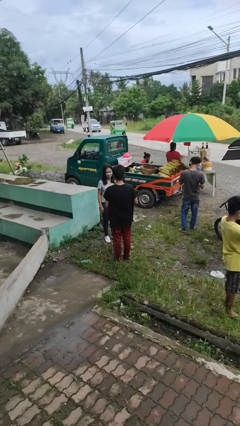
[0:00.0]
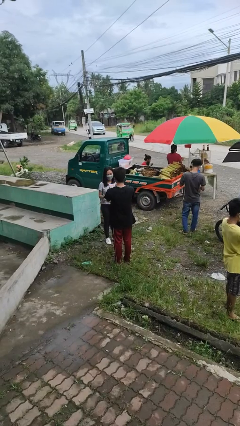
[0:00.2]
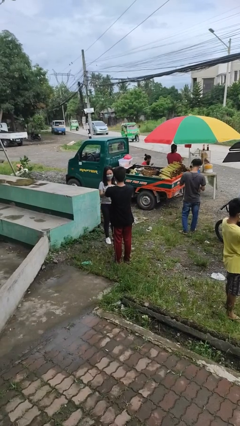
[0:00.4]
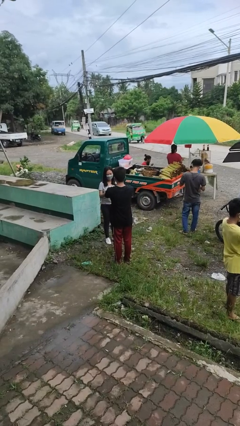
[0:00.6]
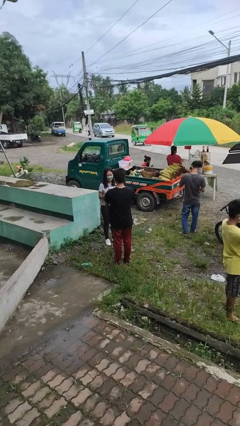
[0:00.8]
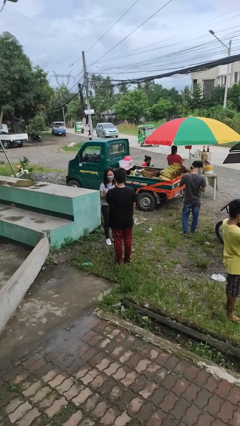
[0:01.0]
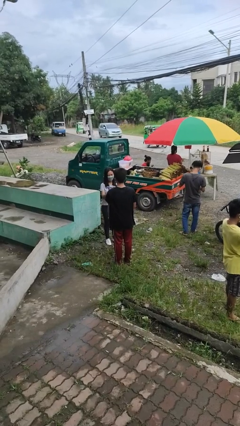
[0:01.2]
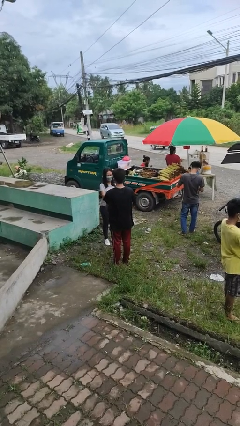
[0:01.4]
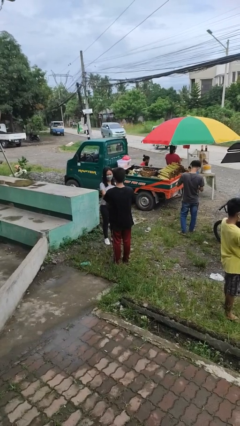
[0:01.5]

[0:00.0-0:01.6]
person transfers object to person

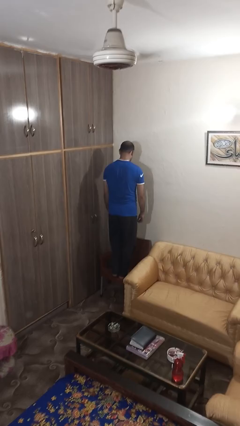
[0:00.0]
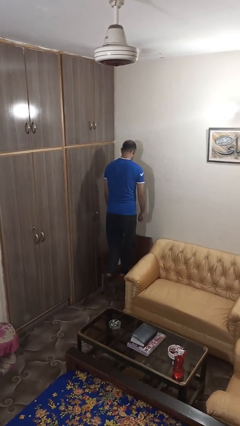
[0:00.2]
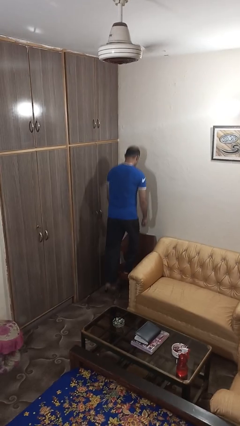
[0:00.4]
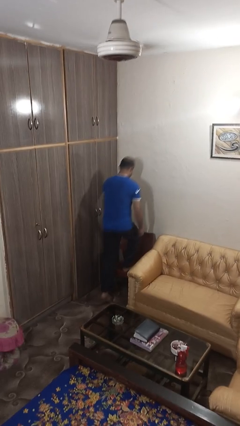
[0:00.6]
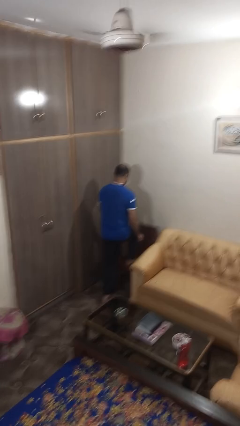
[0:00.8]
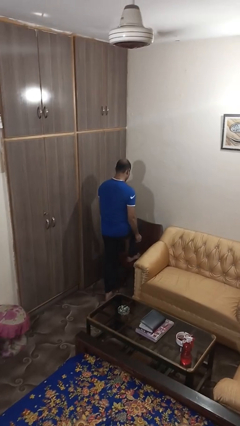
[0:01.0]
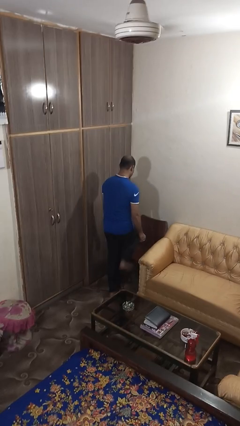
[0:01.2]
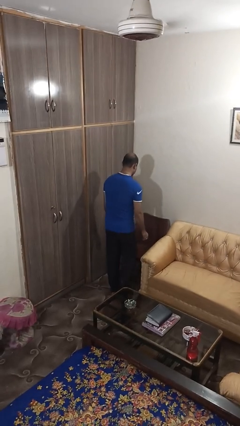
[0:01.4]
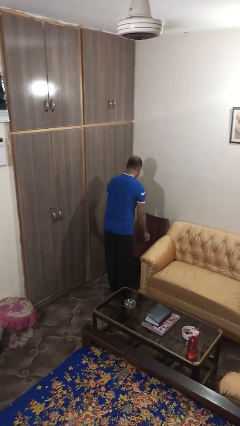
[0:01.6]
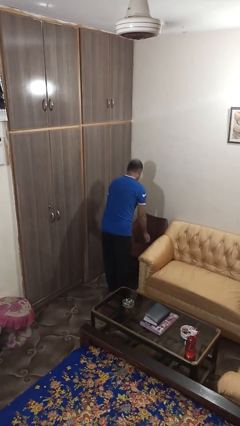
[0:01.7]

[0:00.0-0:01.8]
person climbs off chair

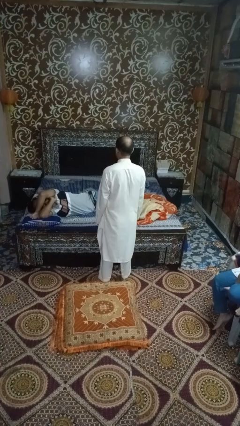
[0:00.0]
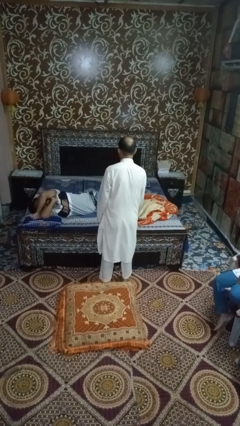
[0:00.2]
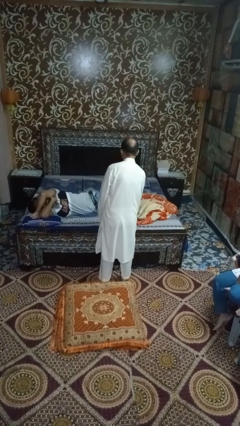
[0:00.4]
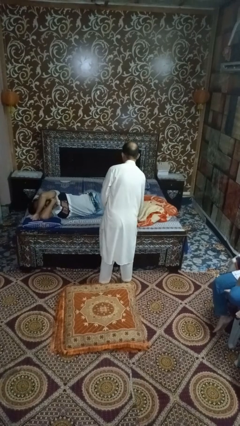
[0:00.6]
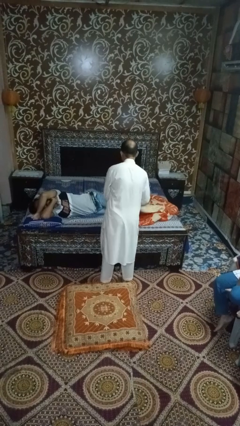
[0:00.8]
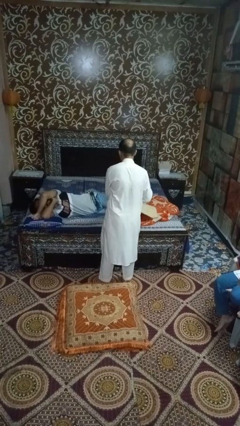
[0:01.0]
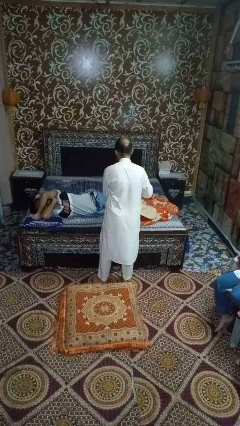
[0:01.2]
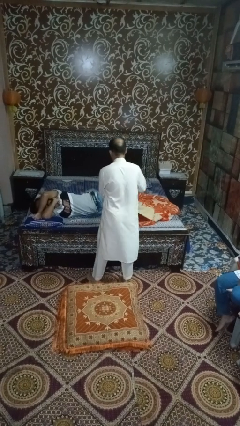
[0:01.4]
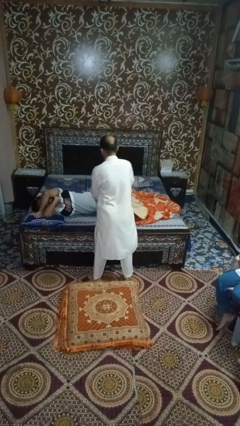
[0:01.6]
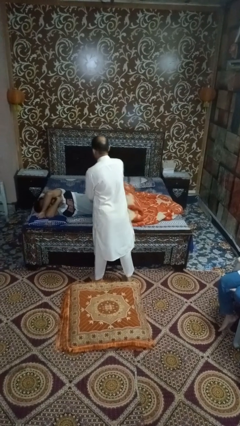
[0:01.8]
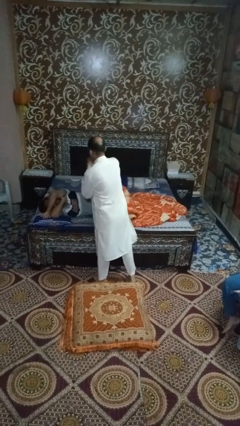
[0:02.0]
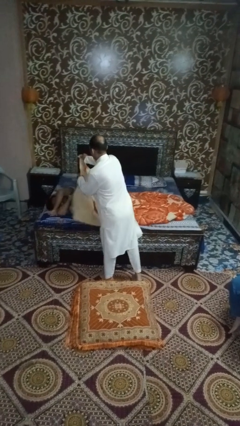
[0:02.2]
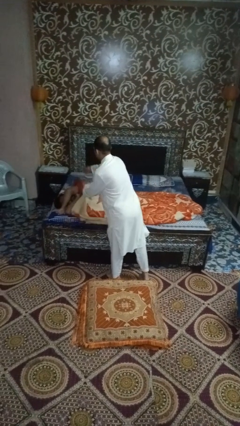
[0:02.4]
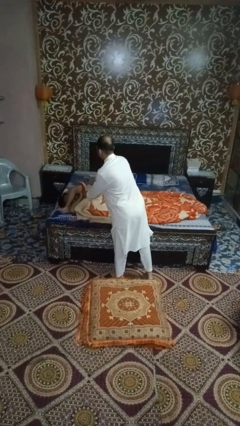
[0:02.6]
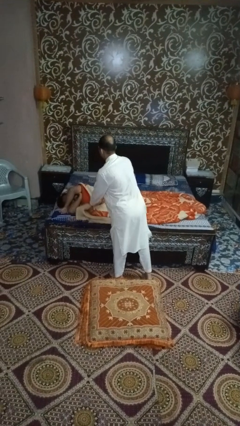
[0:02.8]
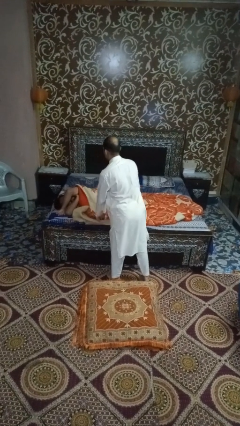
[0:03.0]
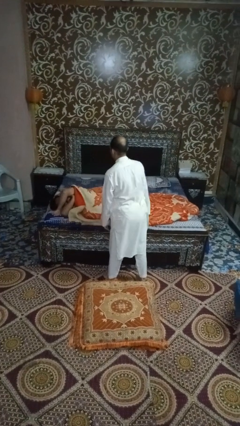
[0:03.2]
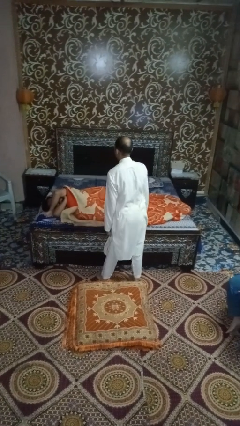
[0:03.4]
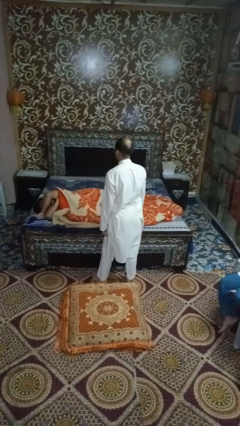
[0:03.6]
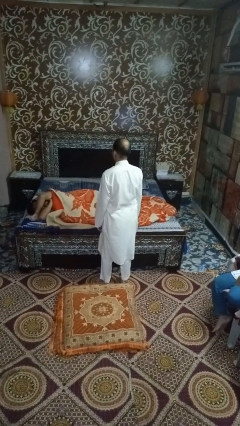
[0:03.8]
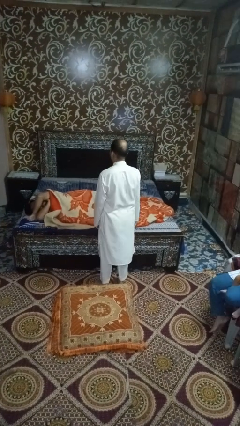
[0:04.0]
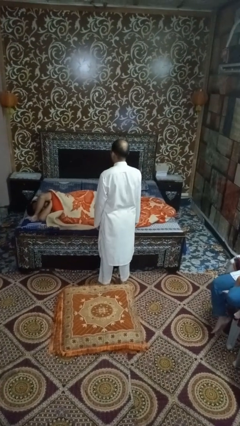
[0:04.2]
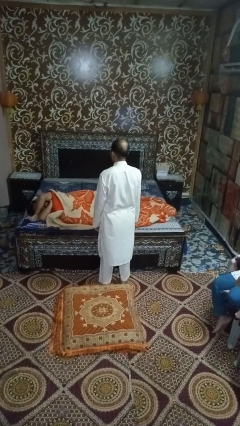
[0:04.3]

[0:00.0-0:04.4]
person covers friend with blanket

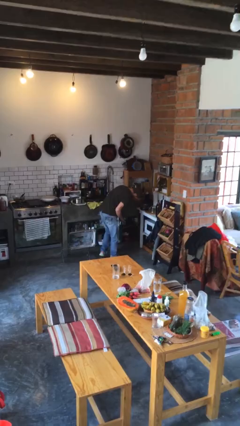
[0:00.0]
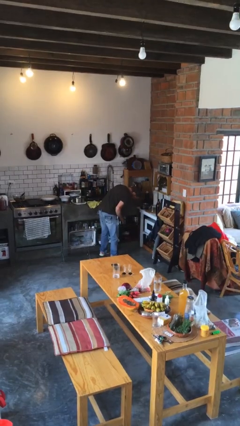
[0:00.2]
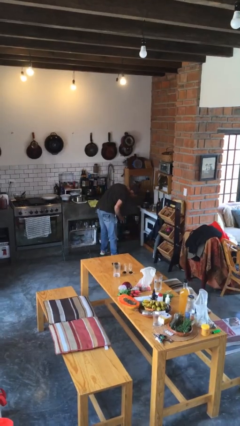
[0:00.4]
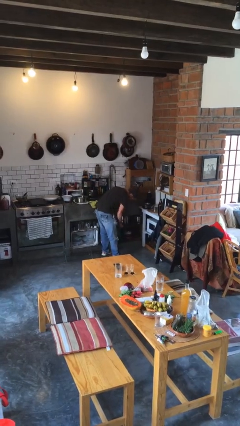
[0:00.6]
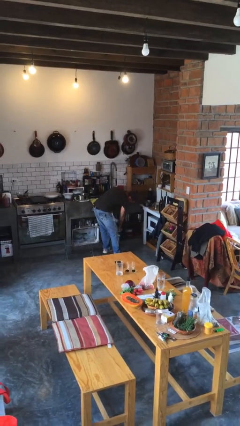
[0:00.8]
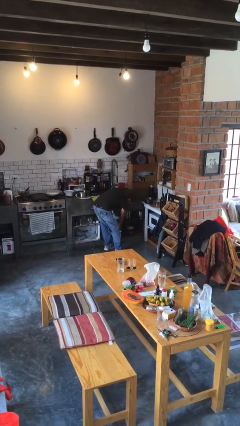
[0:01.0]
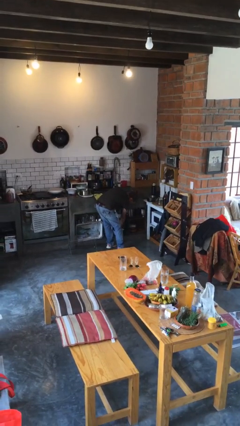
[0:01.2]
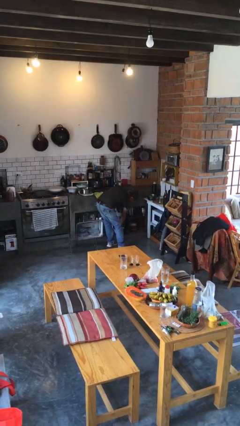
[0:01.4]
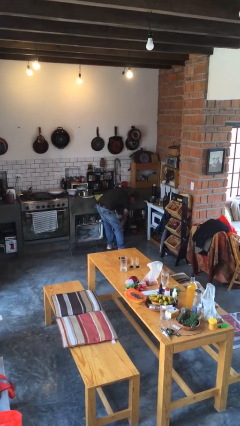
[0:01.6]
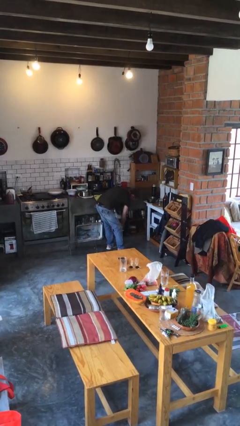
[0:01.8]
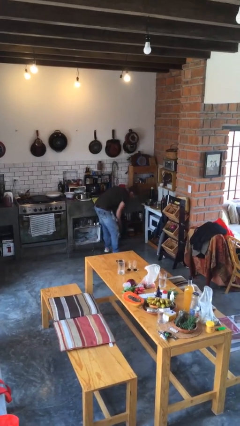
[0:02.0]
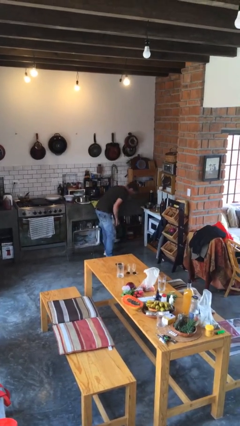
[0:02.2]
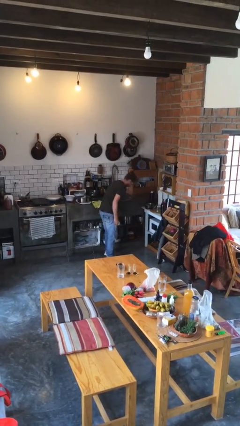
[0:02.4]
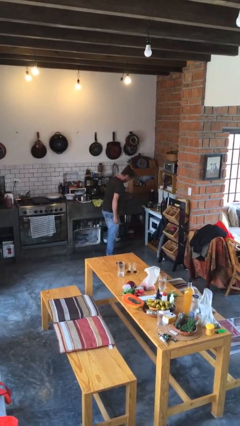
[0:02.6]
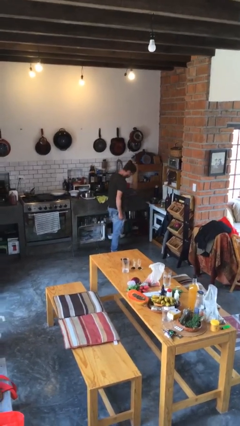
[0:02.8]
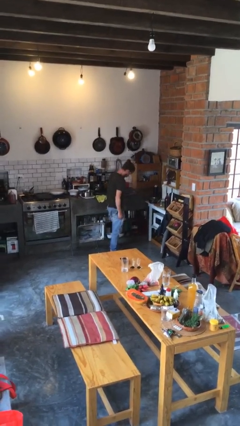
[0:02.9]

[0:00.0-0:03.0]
person puts down object into cabinet

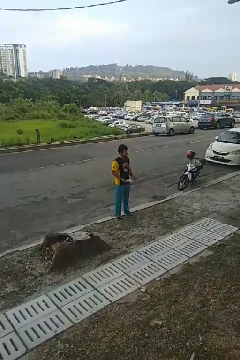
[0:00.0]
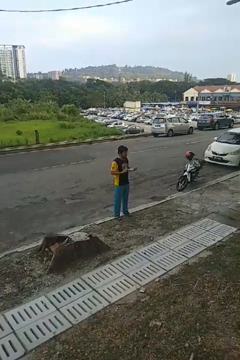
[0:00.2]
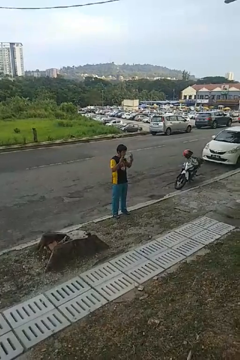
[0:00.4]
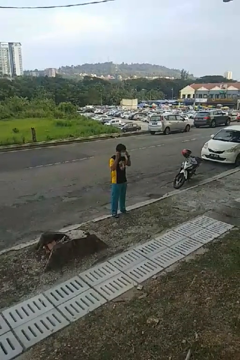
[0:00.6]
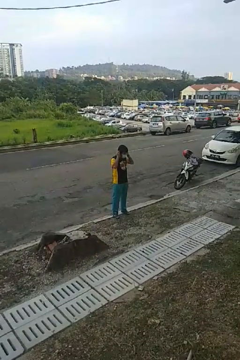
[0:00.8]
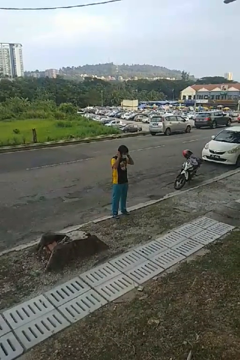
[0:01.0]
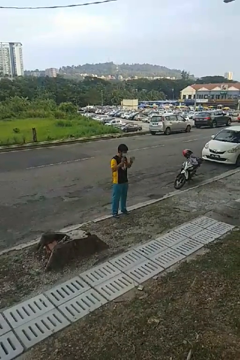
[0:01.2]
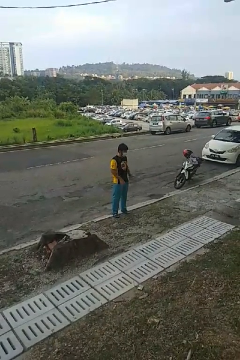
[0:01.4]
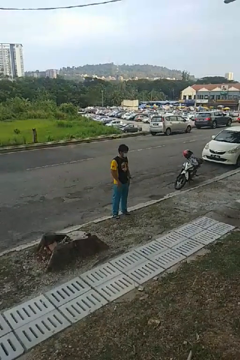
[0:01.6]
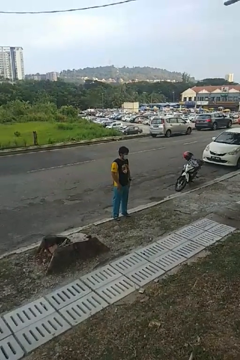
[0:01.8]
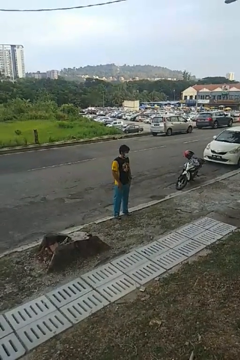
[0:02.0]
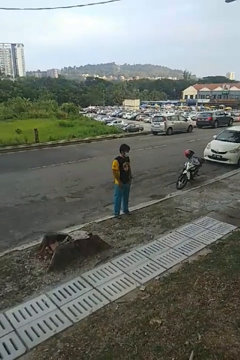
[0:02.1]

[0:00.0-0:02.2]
person puts on facemask

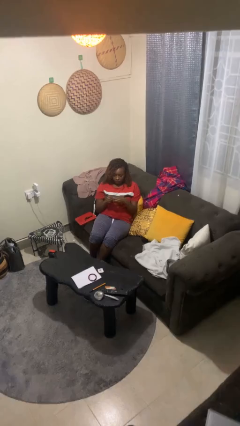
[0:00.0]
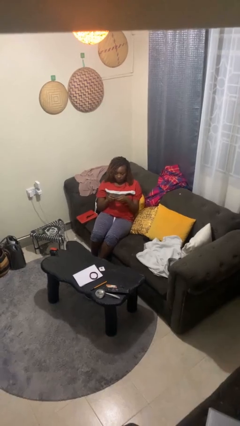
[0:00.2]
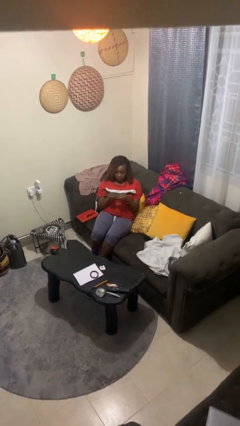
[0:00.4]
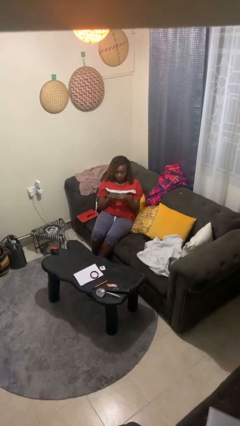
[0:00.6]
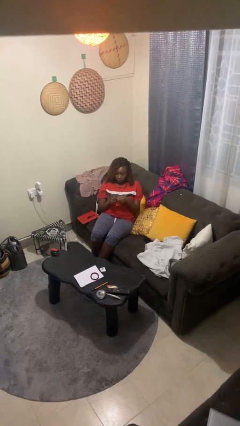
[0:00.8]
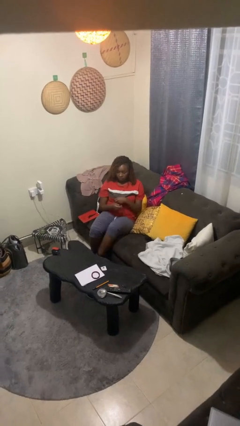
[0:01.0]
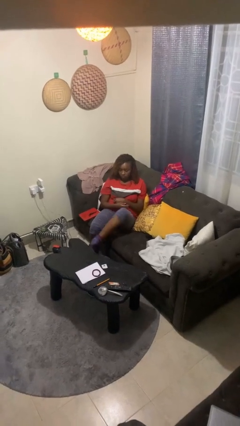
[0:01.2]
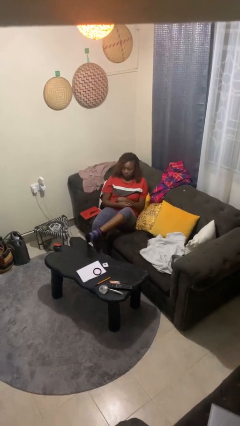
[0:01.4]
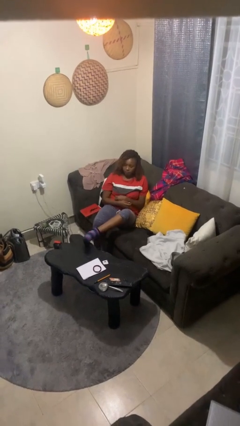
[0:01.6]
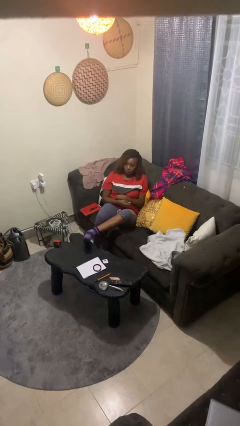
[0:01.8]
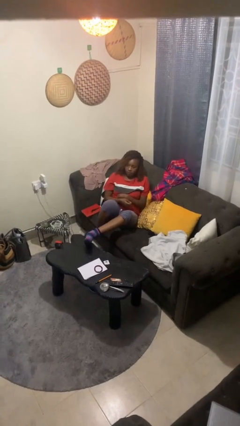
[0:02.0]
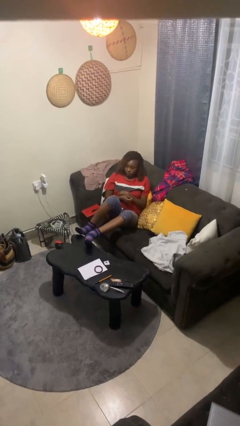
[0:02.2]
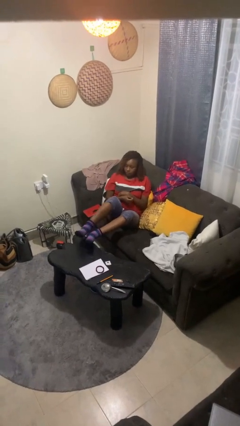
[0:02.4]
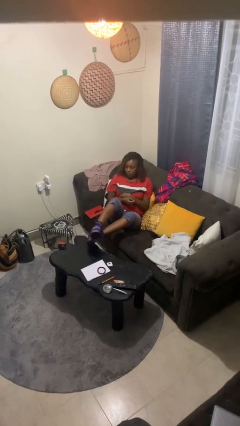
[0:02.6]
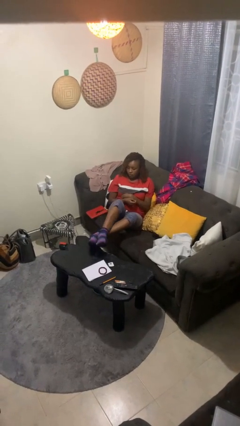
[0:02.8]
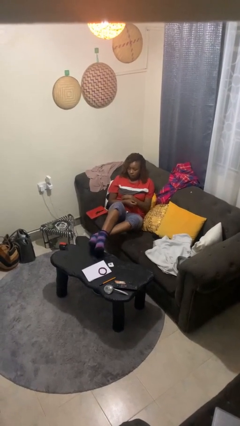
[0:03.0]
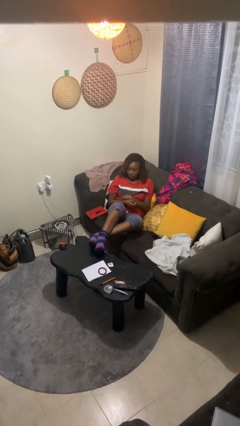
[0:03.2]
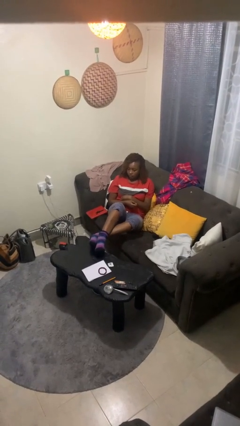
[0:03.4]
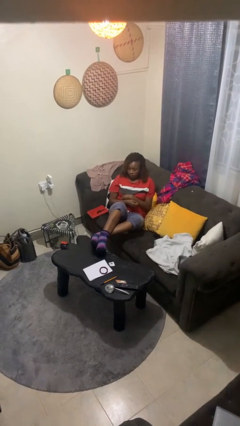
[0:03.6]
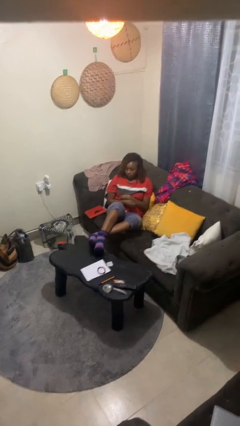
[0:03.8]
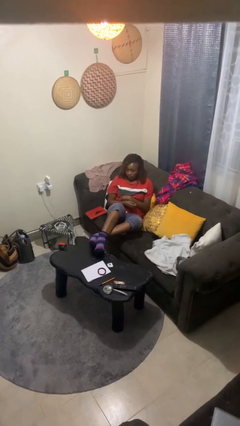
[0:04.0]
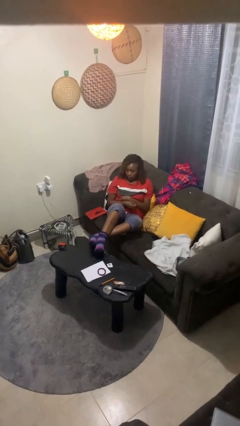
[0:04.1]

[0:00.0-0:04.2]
person puts feet up

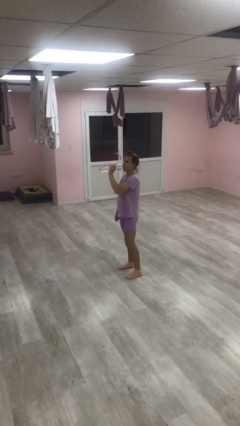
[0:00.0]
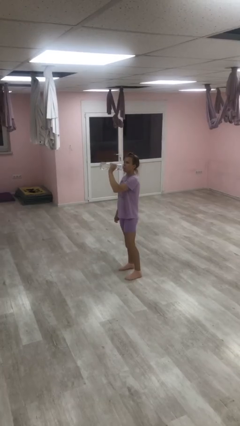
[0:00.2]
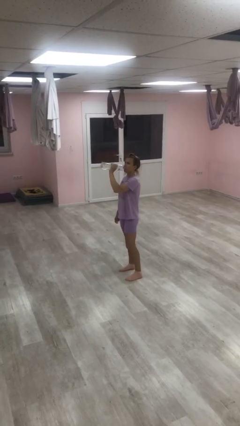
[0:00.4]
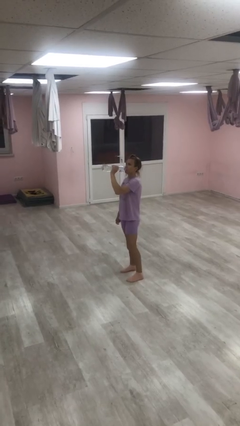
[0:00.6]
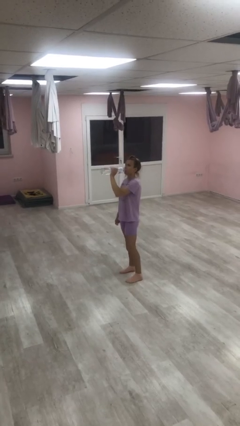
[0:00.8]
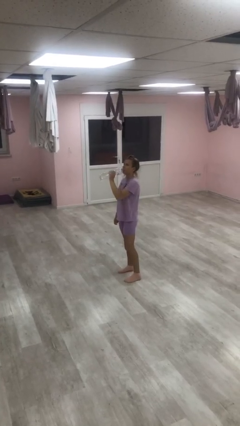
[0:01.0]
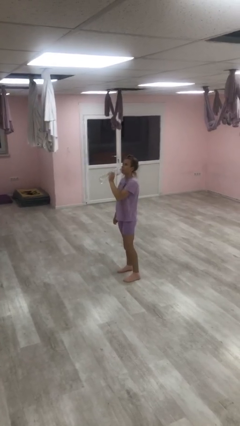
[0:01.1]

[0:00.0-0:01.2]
person drinks from bottle
